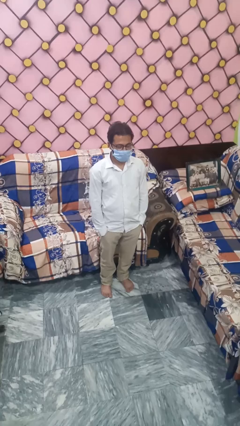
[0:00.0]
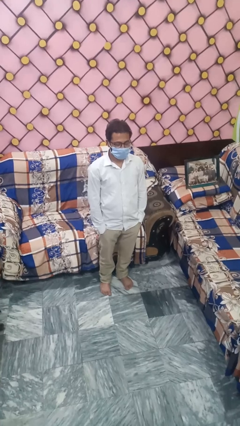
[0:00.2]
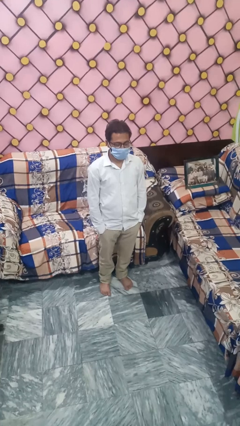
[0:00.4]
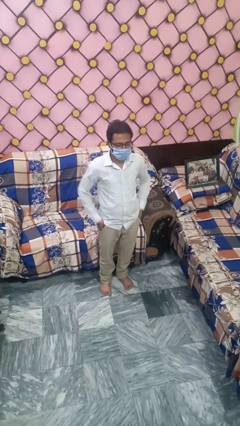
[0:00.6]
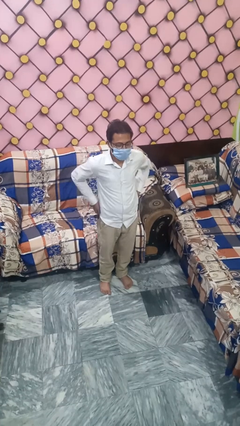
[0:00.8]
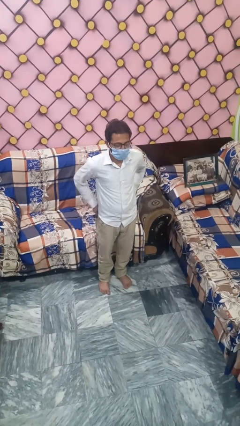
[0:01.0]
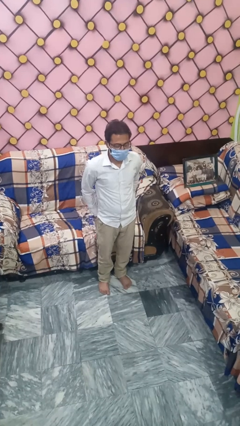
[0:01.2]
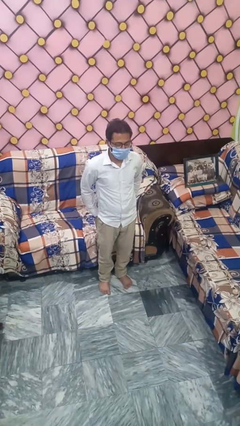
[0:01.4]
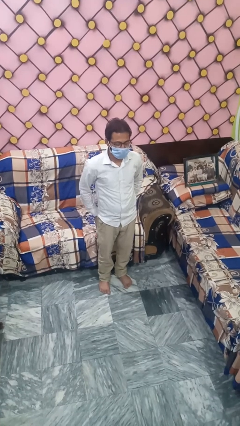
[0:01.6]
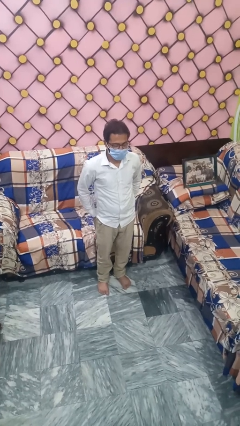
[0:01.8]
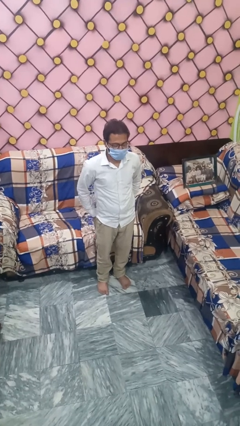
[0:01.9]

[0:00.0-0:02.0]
person puts hands in back pockets

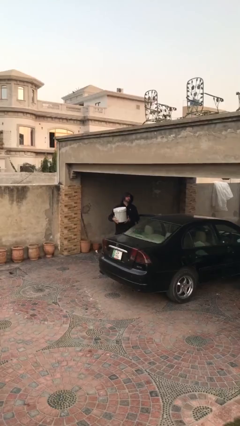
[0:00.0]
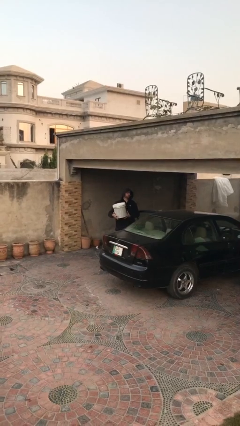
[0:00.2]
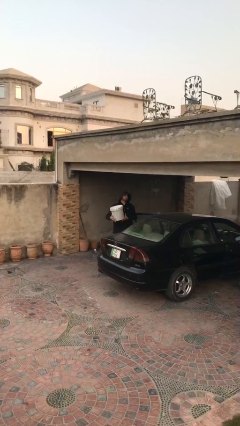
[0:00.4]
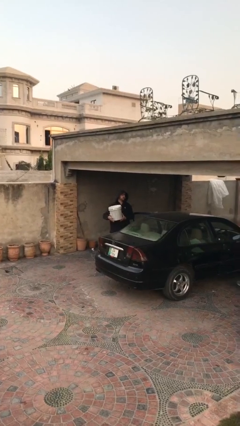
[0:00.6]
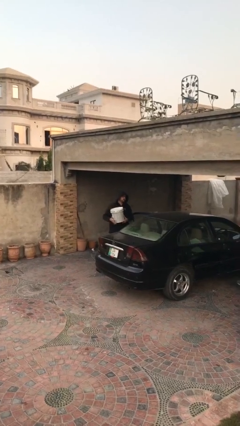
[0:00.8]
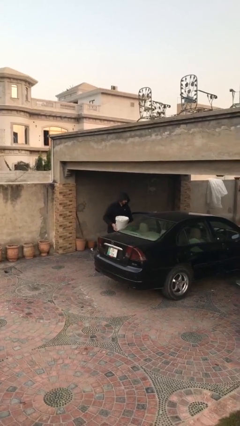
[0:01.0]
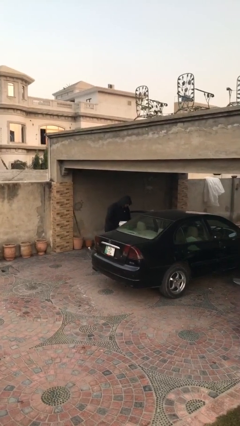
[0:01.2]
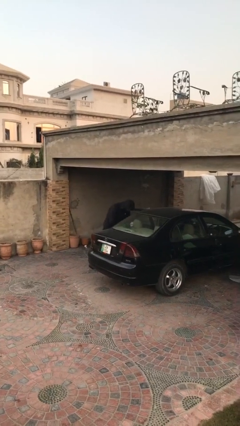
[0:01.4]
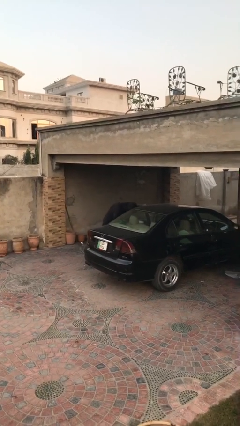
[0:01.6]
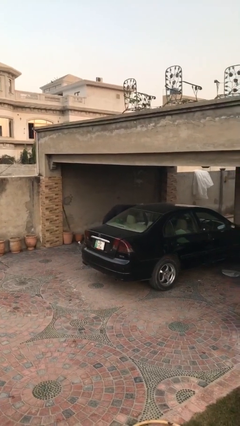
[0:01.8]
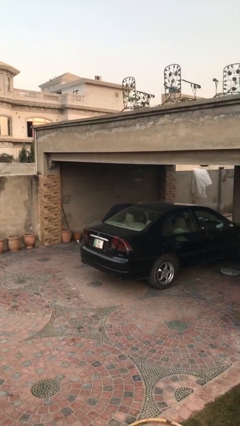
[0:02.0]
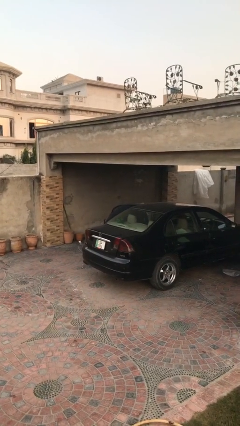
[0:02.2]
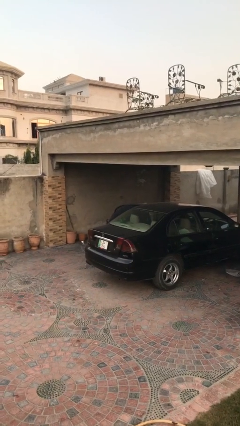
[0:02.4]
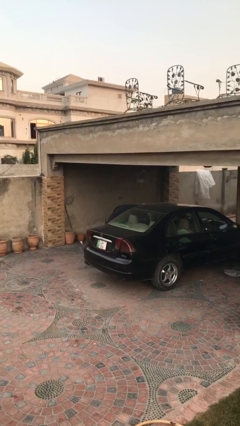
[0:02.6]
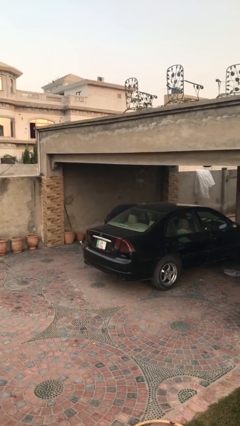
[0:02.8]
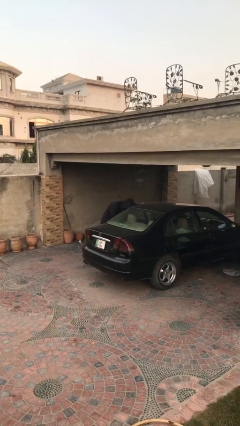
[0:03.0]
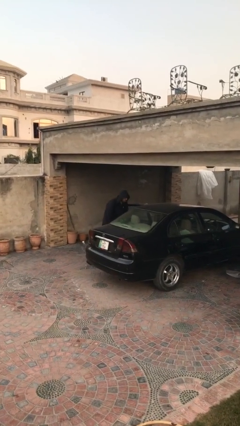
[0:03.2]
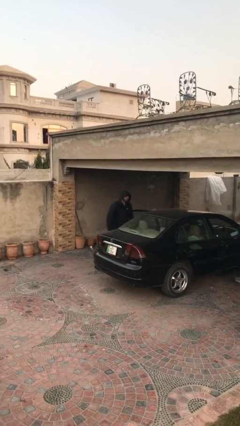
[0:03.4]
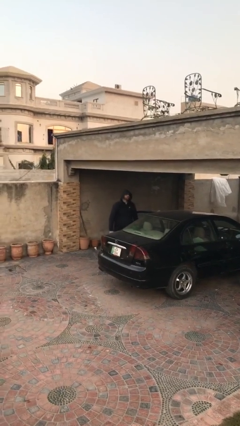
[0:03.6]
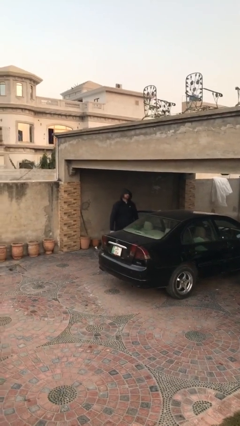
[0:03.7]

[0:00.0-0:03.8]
person loads car

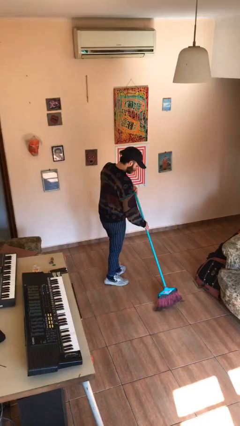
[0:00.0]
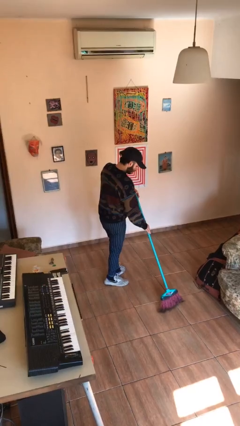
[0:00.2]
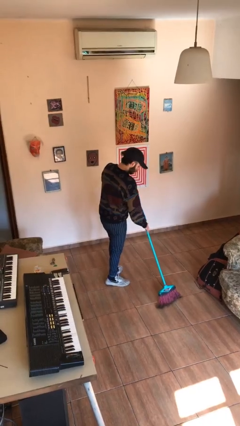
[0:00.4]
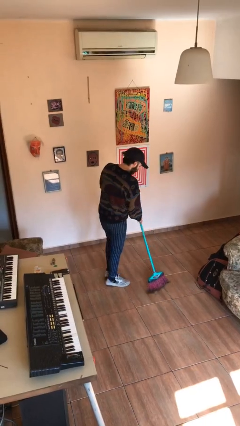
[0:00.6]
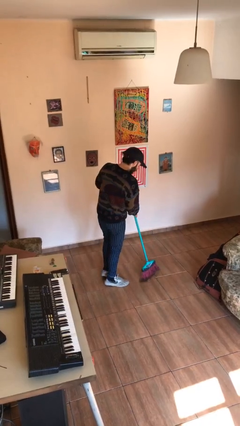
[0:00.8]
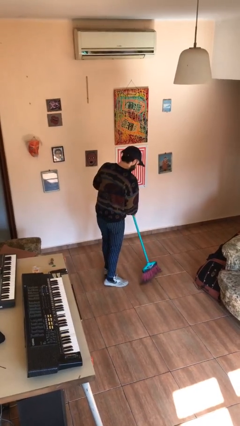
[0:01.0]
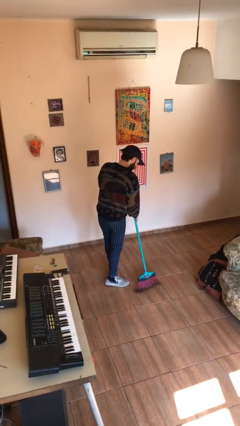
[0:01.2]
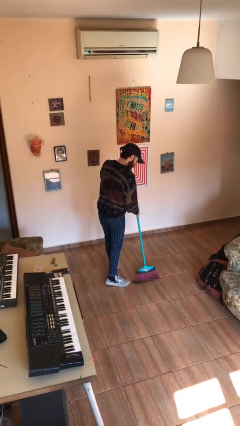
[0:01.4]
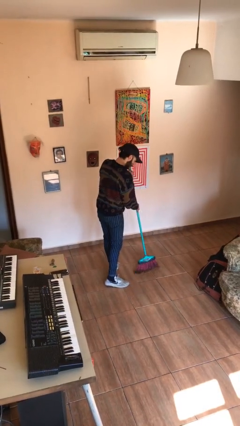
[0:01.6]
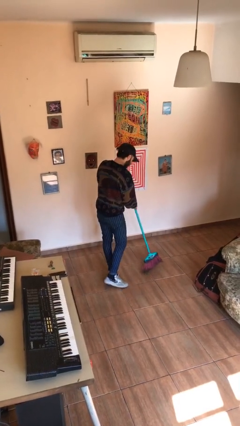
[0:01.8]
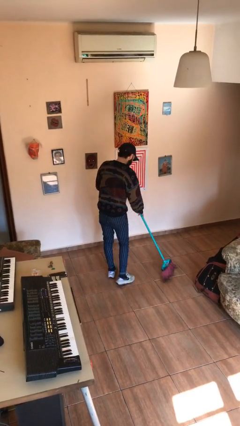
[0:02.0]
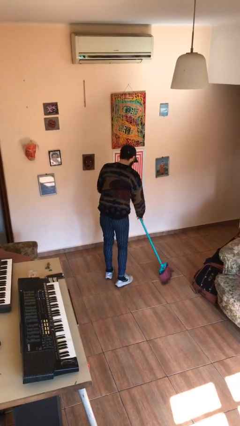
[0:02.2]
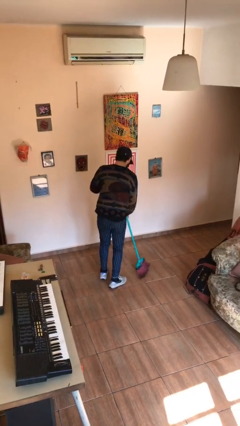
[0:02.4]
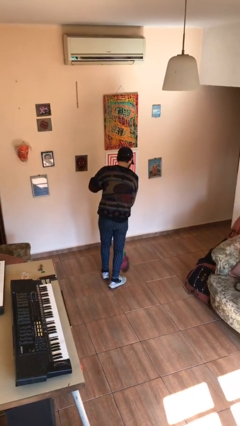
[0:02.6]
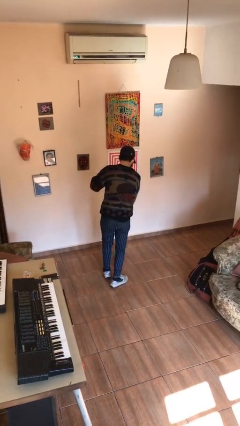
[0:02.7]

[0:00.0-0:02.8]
person sweeps floor

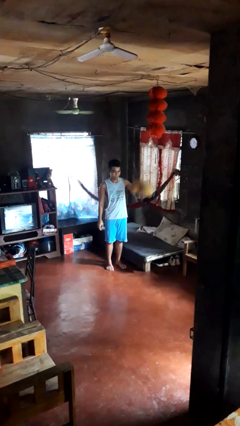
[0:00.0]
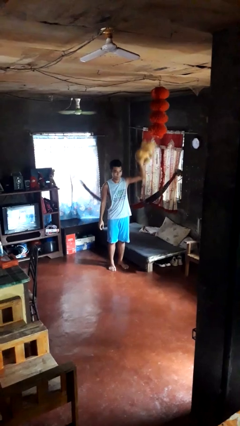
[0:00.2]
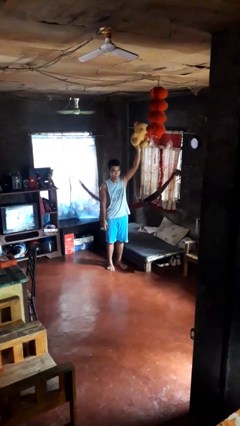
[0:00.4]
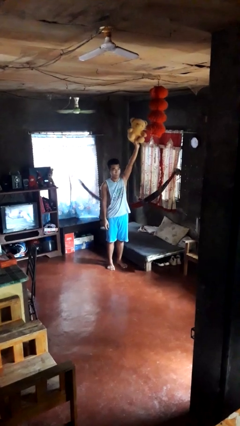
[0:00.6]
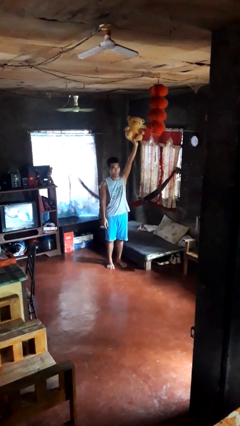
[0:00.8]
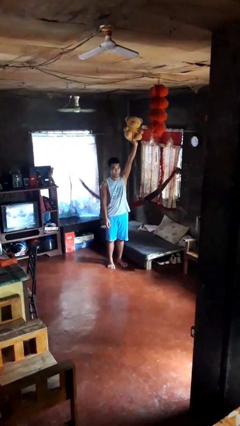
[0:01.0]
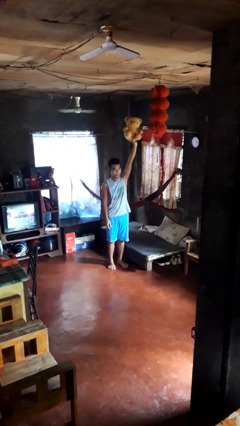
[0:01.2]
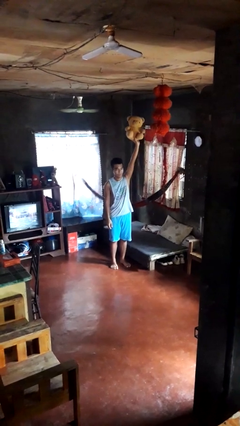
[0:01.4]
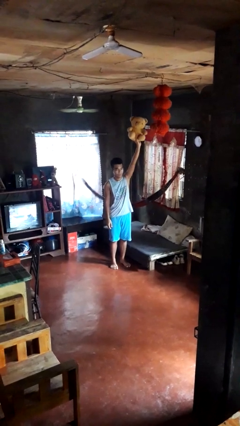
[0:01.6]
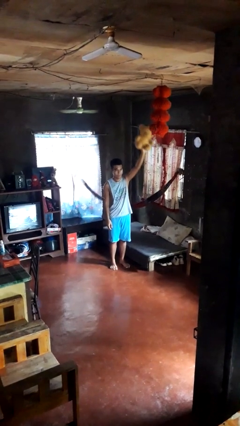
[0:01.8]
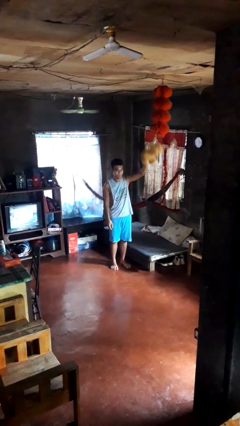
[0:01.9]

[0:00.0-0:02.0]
person holds object above head

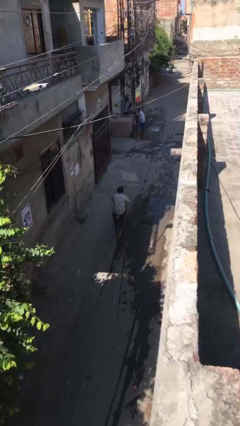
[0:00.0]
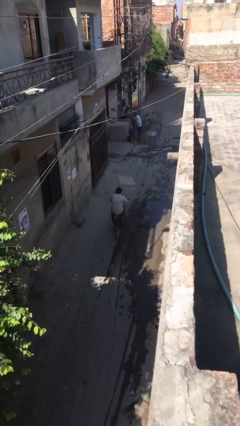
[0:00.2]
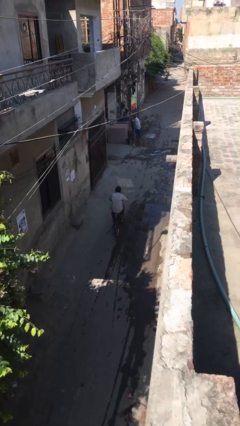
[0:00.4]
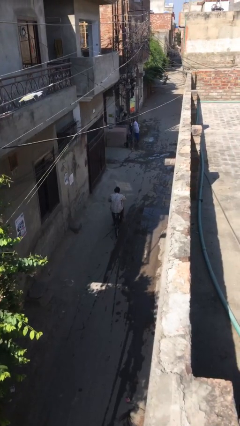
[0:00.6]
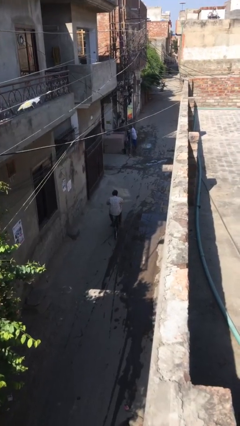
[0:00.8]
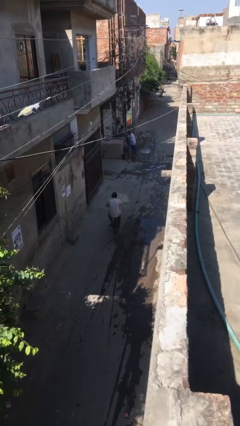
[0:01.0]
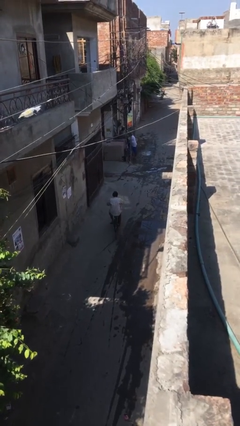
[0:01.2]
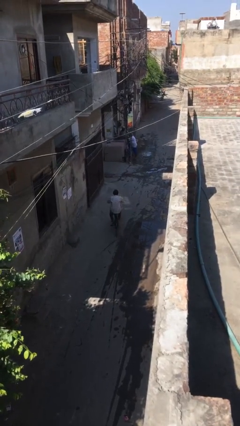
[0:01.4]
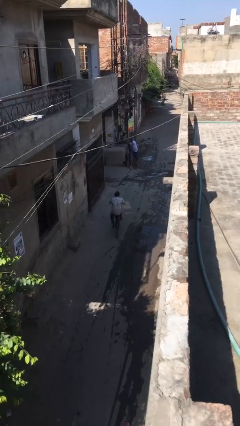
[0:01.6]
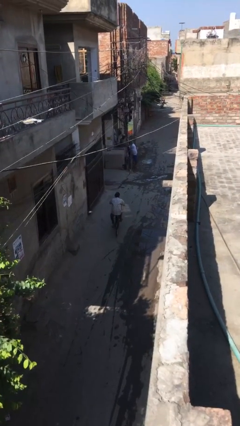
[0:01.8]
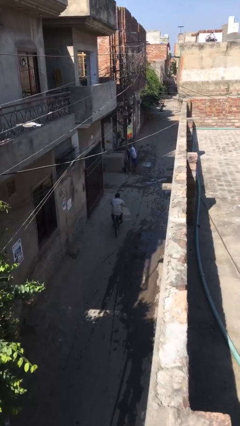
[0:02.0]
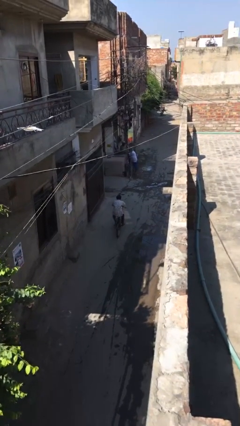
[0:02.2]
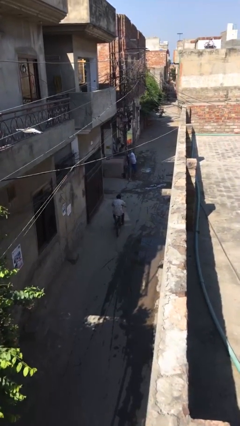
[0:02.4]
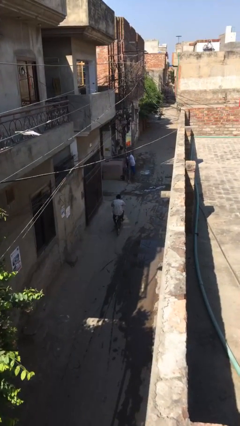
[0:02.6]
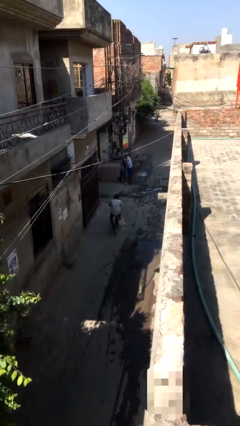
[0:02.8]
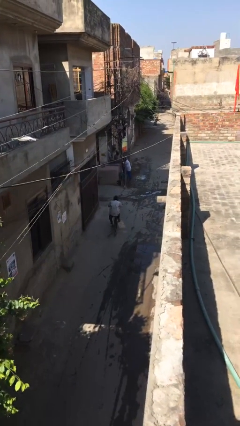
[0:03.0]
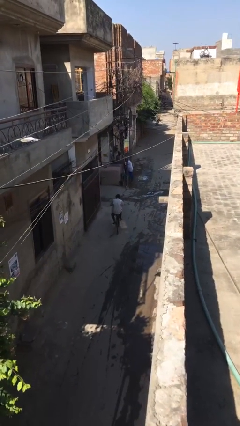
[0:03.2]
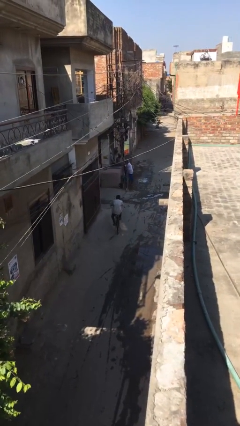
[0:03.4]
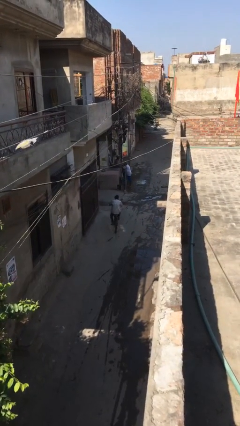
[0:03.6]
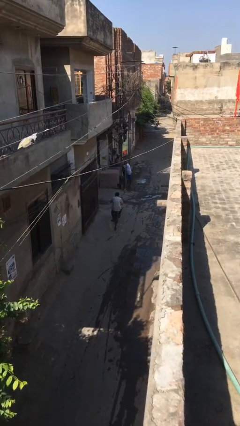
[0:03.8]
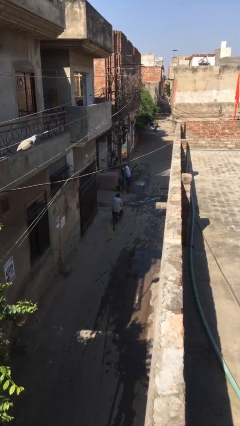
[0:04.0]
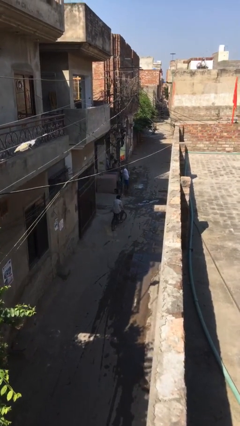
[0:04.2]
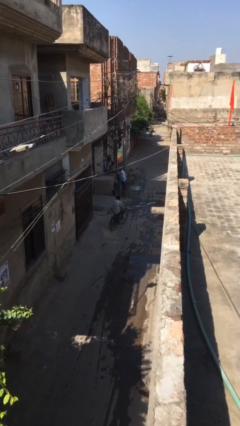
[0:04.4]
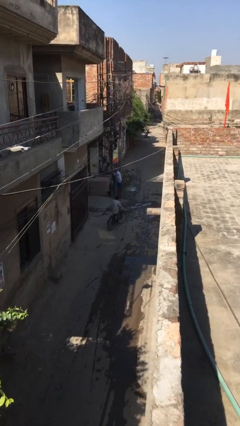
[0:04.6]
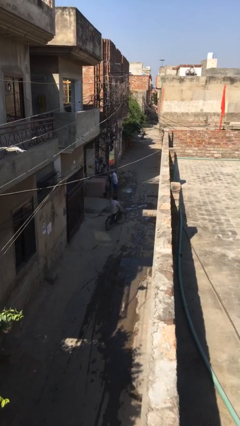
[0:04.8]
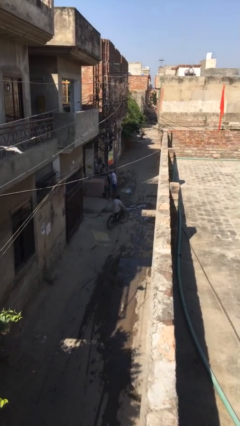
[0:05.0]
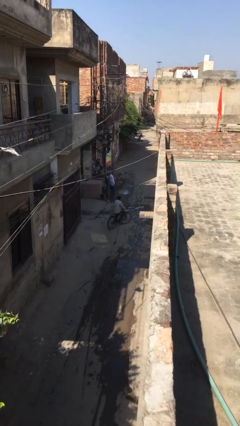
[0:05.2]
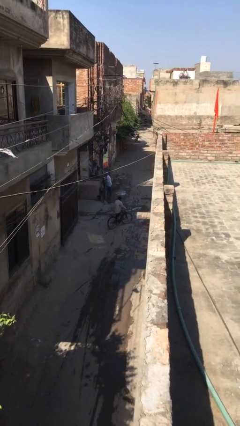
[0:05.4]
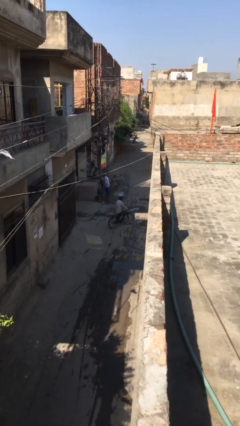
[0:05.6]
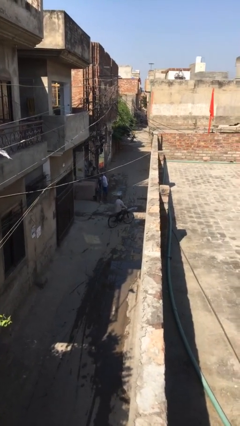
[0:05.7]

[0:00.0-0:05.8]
person rides bicycle

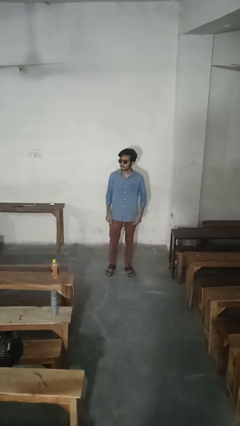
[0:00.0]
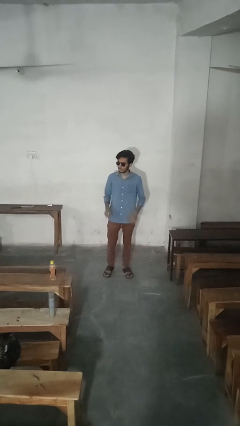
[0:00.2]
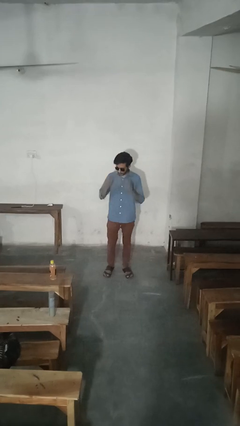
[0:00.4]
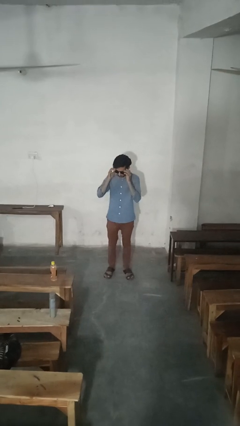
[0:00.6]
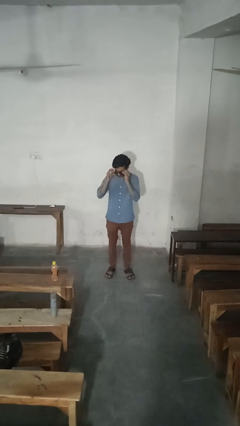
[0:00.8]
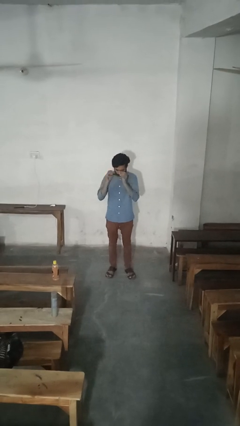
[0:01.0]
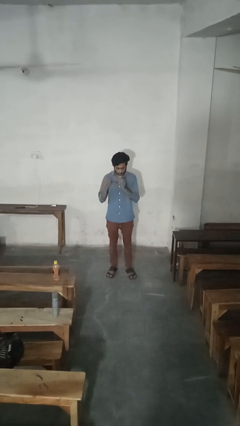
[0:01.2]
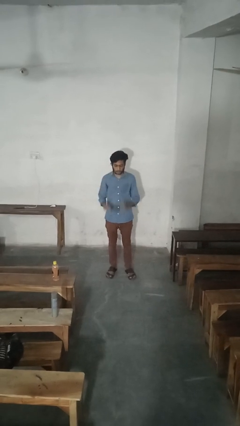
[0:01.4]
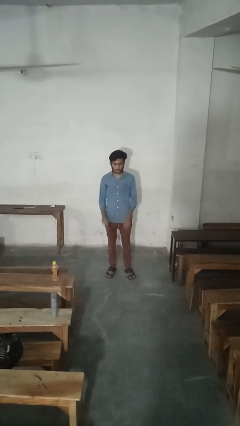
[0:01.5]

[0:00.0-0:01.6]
person takes off sunglasses
